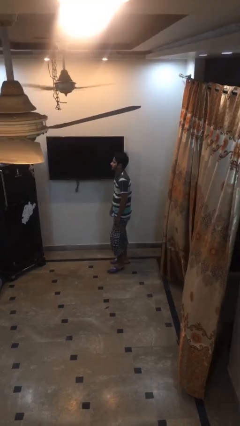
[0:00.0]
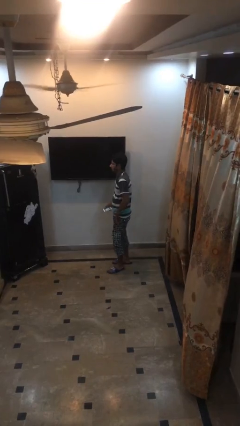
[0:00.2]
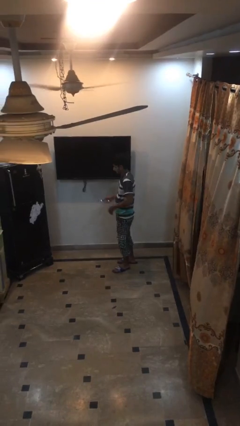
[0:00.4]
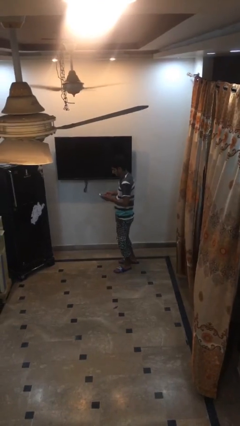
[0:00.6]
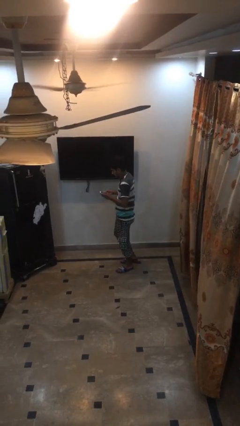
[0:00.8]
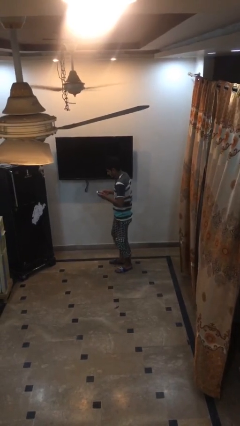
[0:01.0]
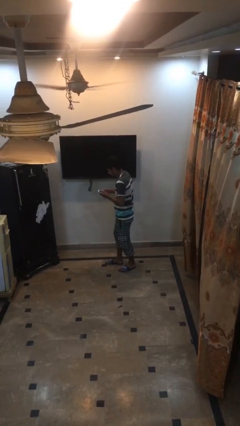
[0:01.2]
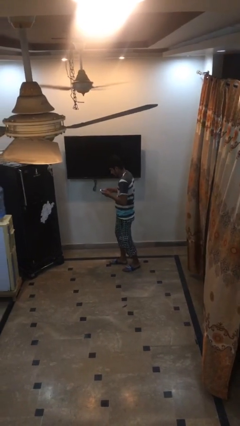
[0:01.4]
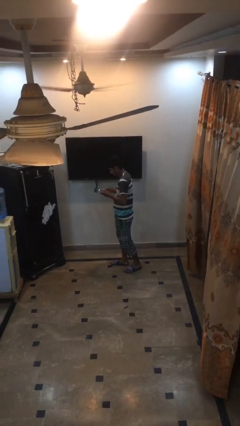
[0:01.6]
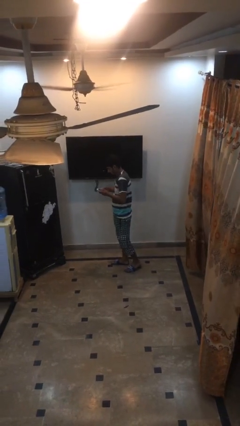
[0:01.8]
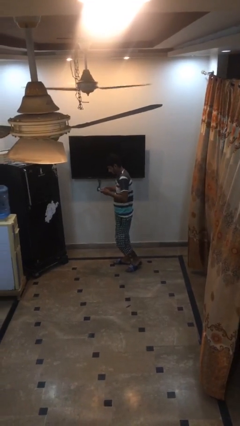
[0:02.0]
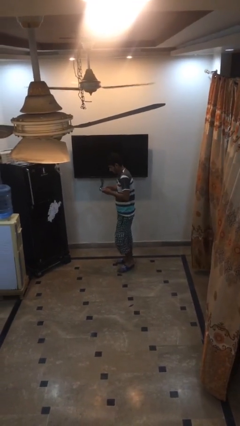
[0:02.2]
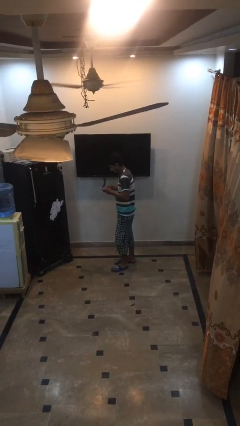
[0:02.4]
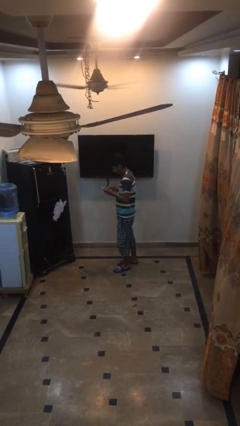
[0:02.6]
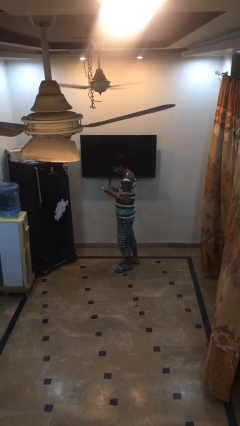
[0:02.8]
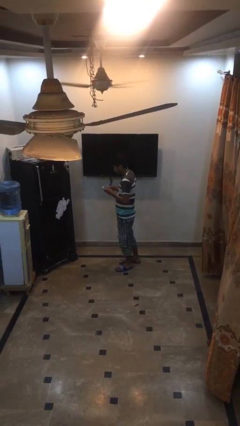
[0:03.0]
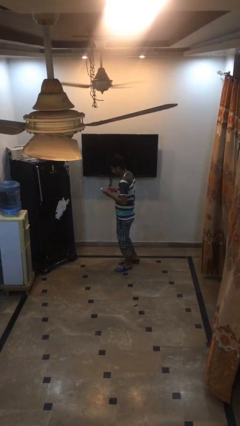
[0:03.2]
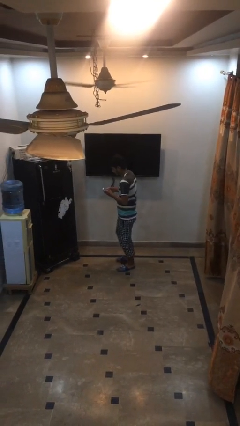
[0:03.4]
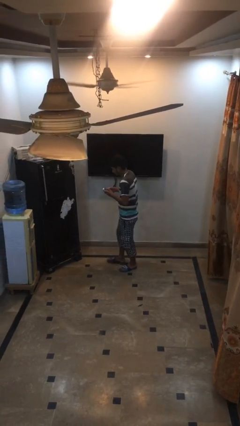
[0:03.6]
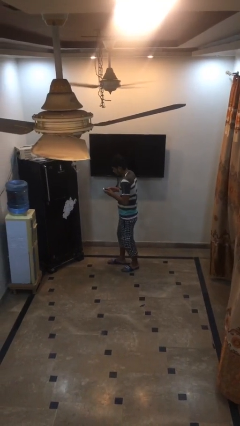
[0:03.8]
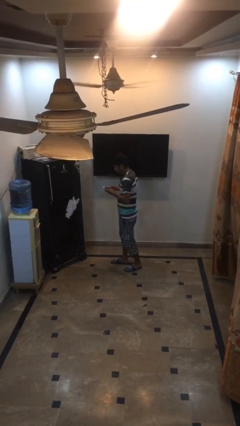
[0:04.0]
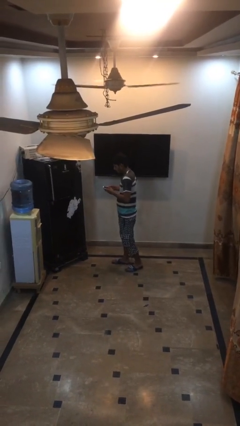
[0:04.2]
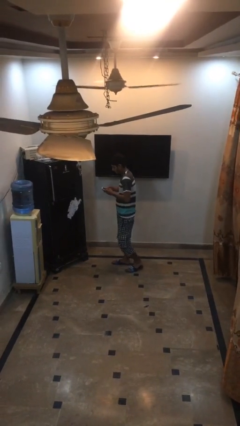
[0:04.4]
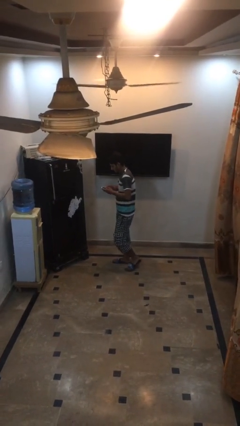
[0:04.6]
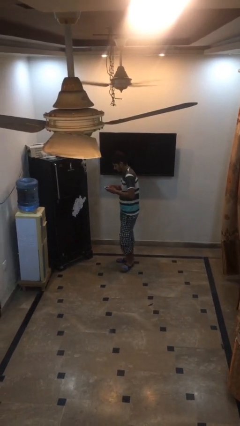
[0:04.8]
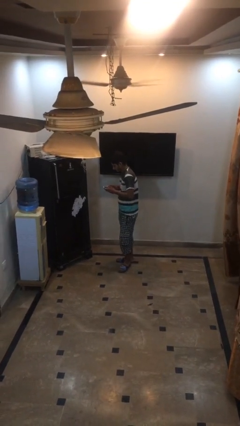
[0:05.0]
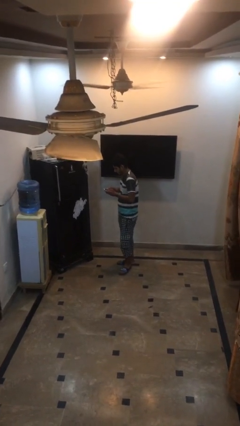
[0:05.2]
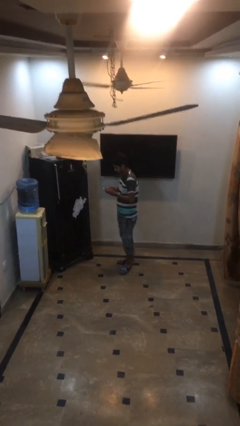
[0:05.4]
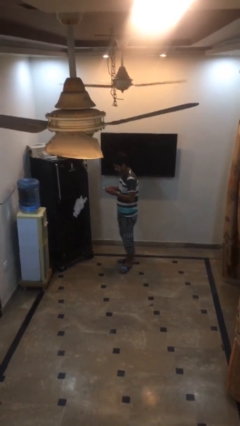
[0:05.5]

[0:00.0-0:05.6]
person texts on phone

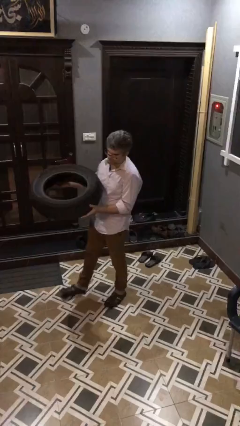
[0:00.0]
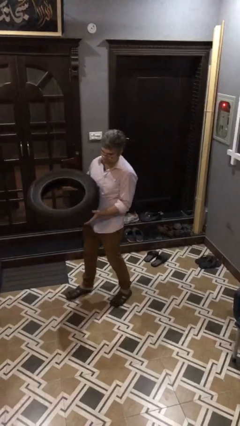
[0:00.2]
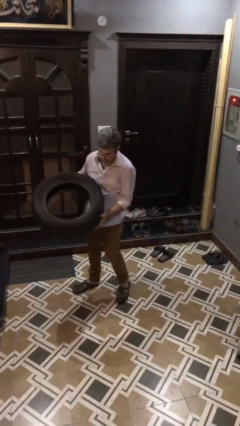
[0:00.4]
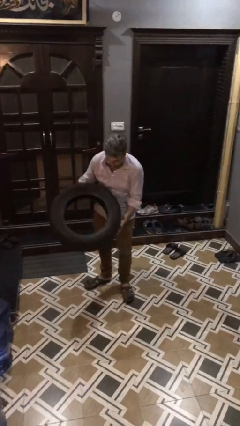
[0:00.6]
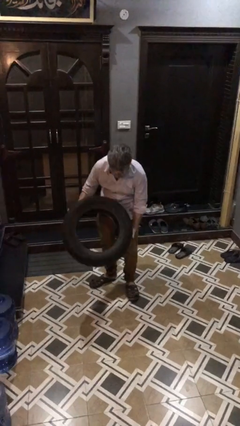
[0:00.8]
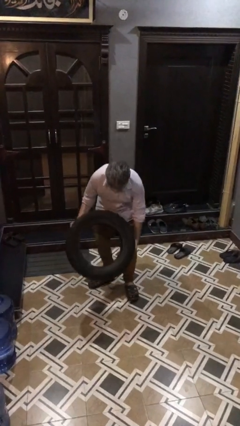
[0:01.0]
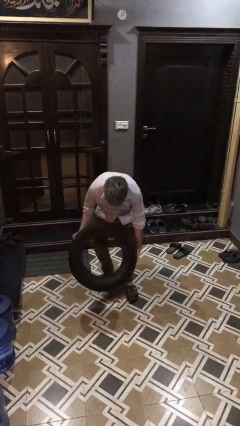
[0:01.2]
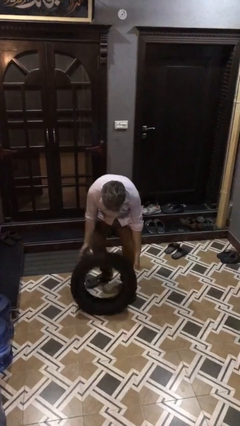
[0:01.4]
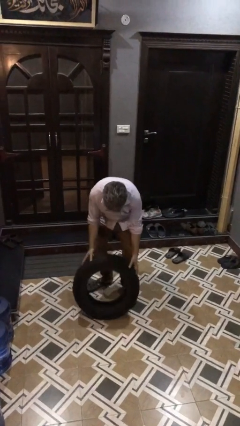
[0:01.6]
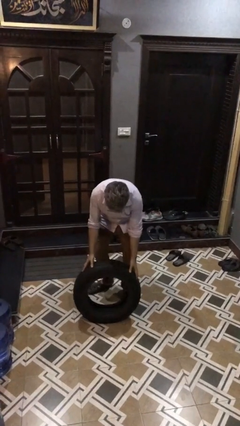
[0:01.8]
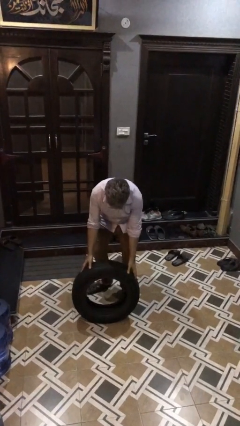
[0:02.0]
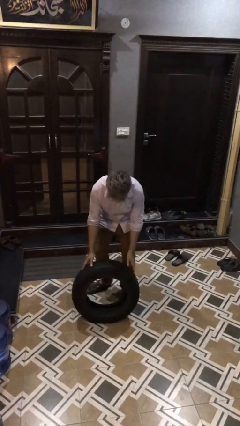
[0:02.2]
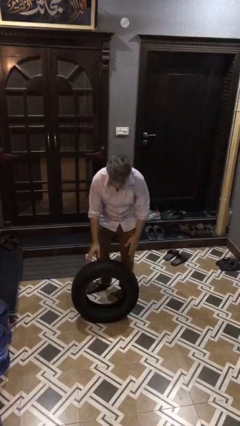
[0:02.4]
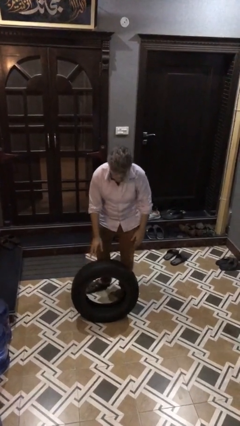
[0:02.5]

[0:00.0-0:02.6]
person puts down object on floor

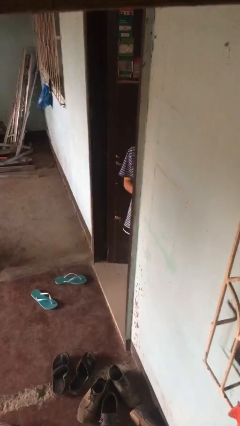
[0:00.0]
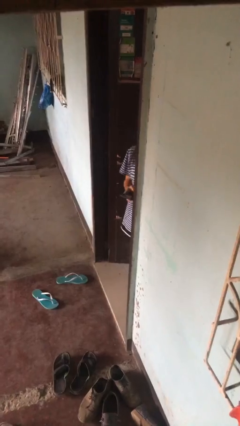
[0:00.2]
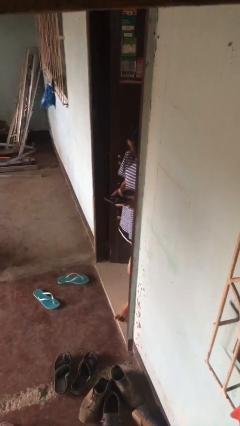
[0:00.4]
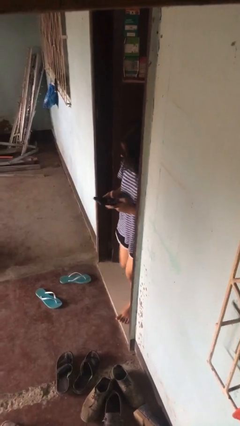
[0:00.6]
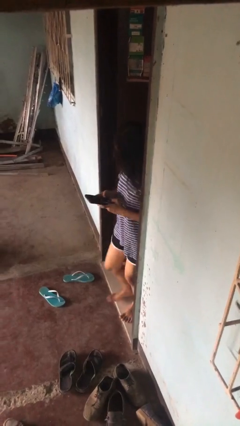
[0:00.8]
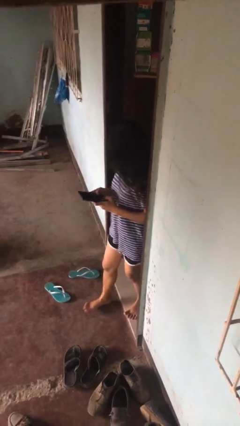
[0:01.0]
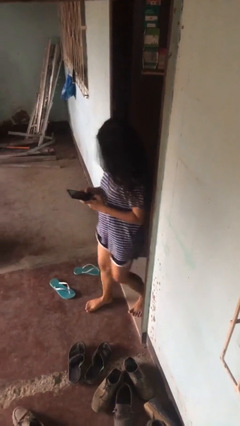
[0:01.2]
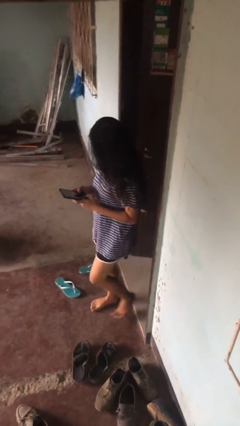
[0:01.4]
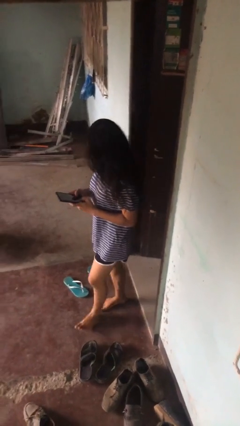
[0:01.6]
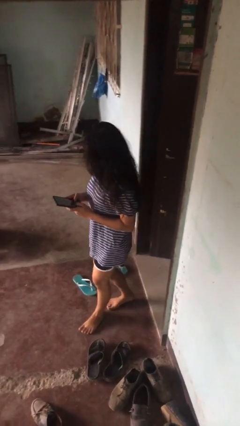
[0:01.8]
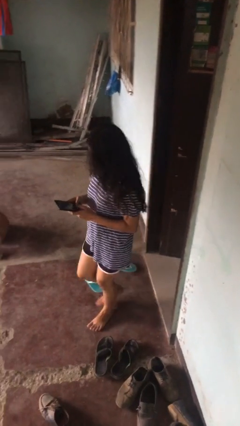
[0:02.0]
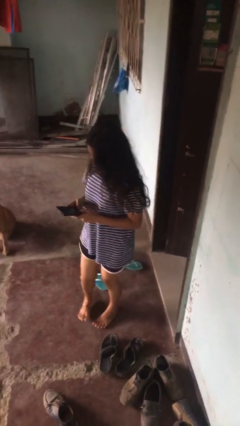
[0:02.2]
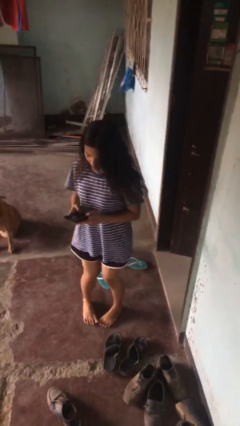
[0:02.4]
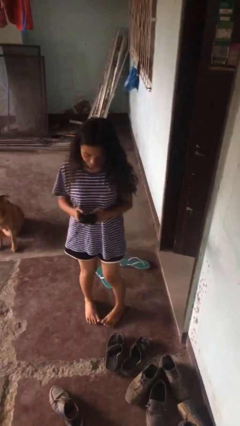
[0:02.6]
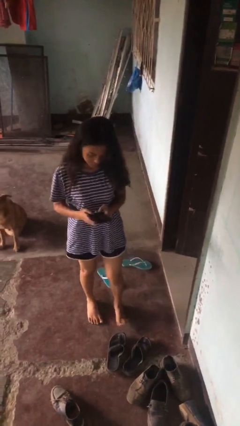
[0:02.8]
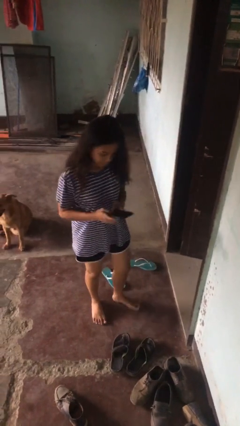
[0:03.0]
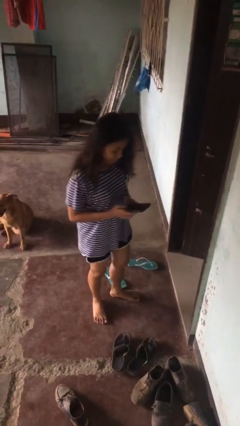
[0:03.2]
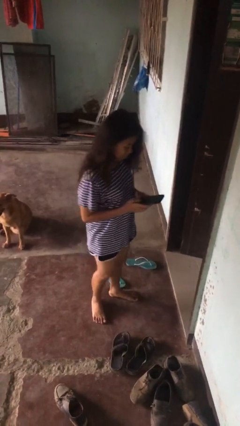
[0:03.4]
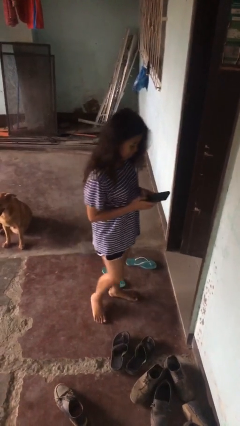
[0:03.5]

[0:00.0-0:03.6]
person exits scene through structure

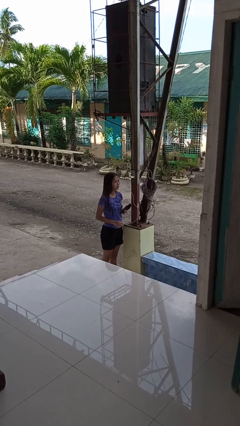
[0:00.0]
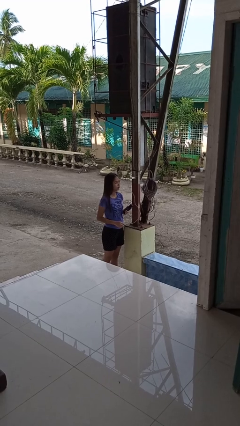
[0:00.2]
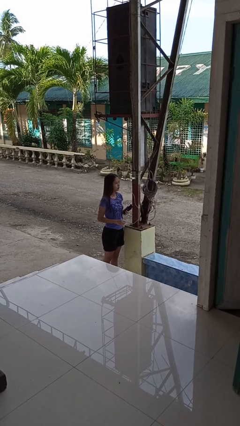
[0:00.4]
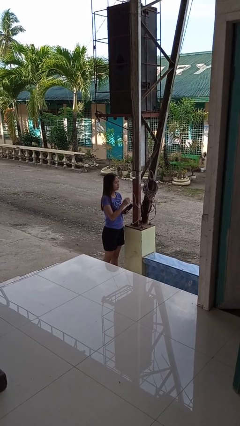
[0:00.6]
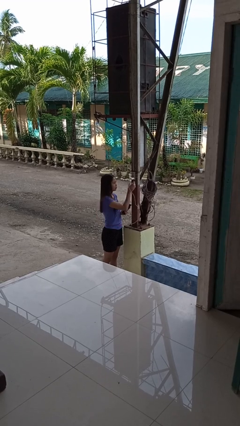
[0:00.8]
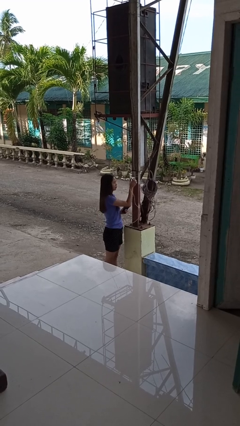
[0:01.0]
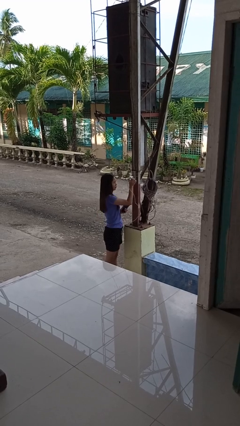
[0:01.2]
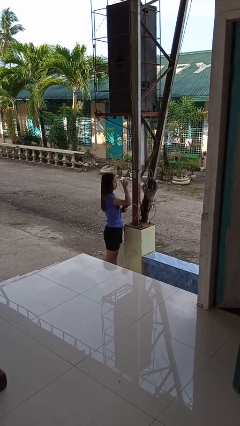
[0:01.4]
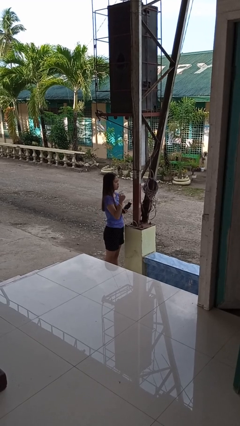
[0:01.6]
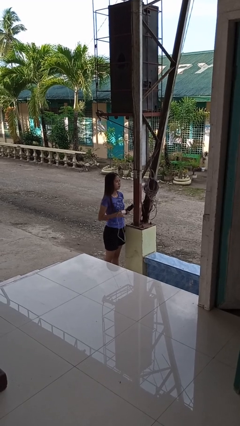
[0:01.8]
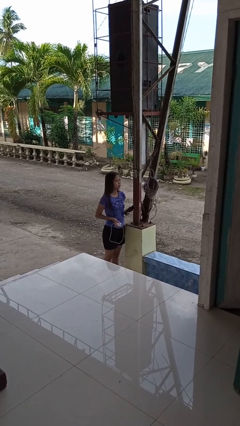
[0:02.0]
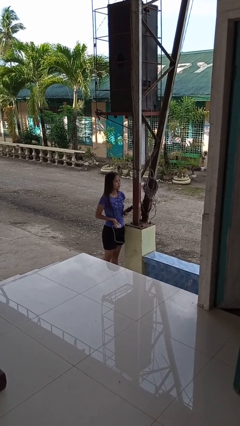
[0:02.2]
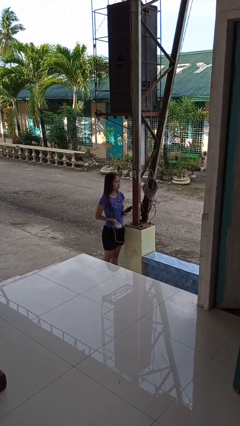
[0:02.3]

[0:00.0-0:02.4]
person unplugs from electrical socket

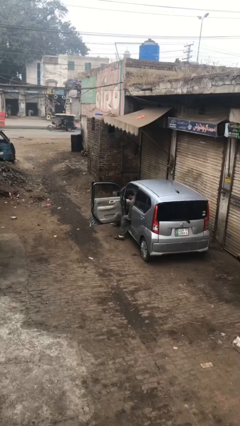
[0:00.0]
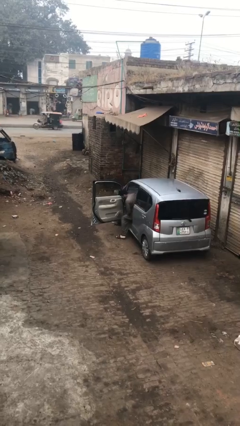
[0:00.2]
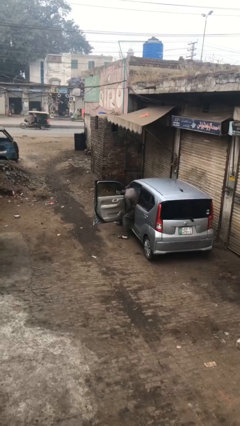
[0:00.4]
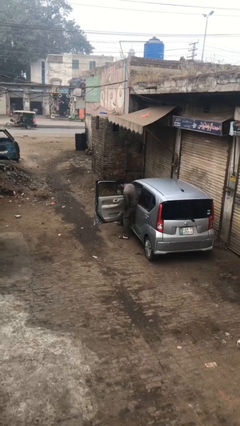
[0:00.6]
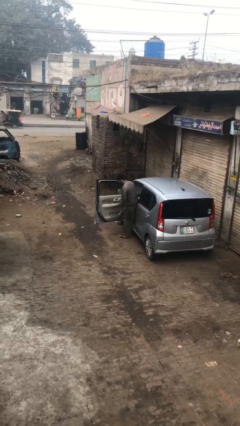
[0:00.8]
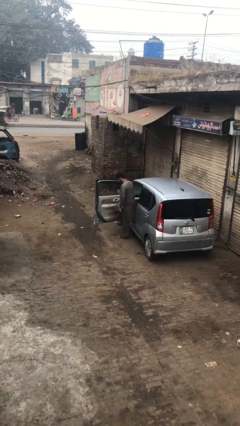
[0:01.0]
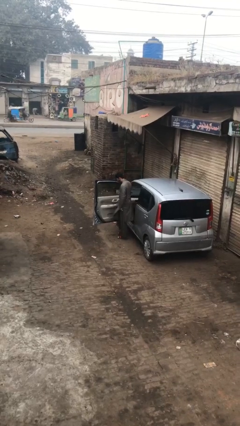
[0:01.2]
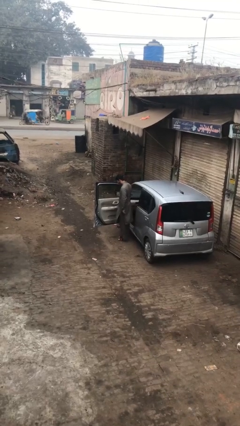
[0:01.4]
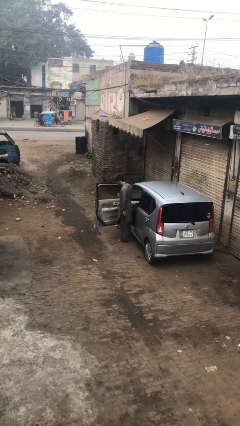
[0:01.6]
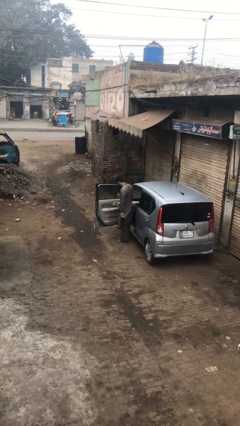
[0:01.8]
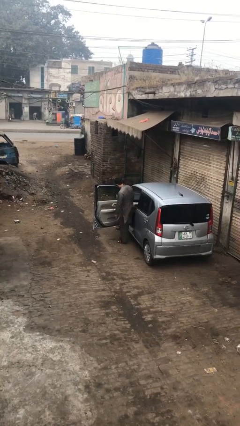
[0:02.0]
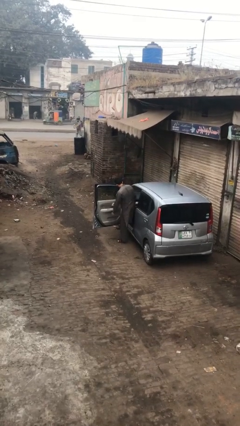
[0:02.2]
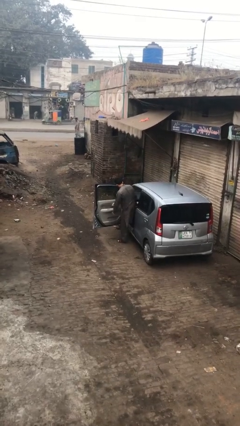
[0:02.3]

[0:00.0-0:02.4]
person exits car

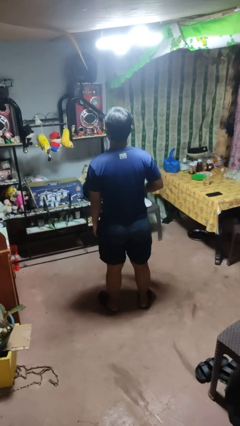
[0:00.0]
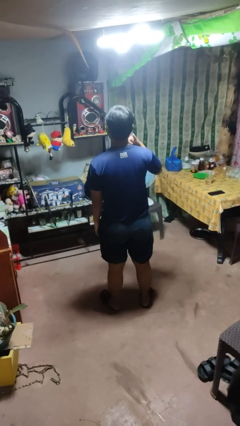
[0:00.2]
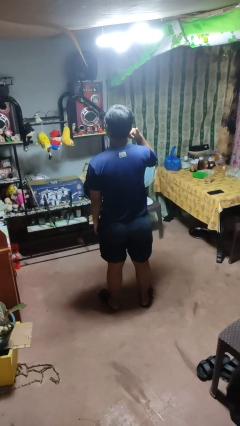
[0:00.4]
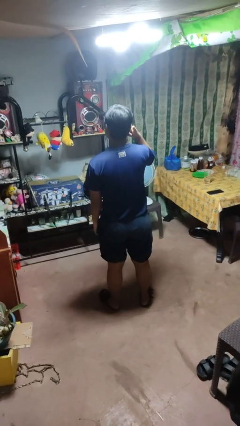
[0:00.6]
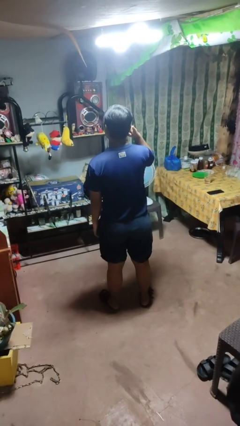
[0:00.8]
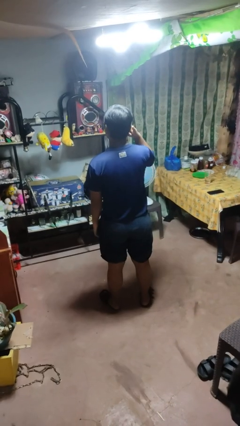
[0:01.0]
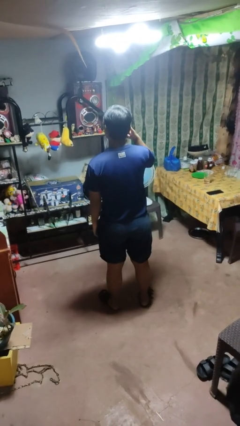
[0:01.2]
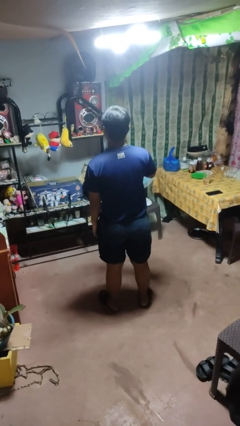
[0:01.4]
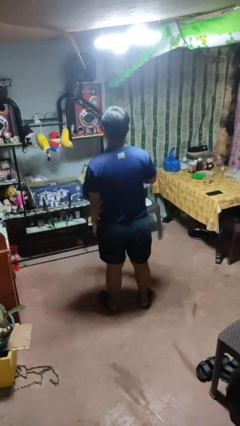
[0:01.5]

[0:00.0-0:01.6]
person gestures call me
